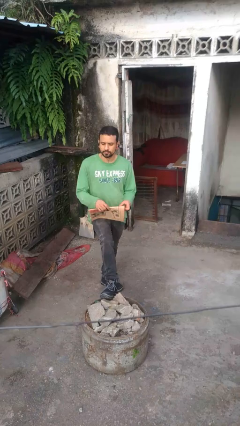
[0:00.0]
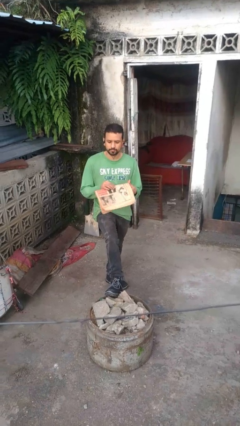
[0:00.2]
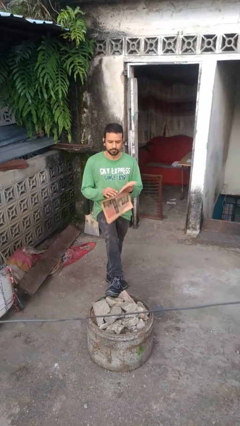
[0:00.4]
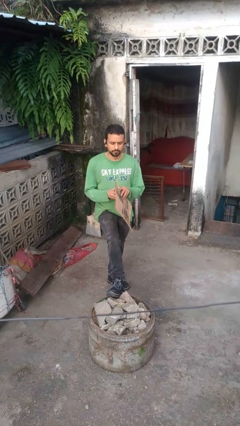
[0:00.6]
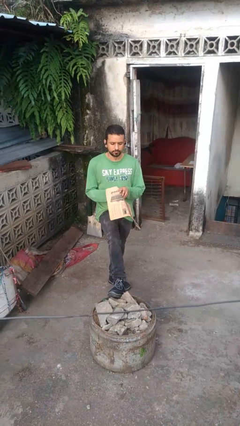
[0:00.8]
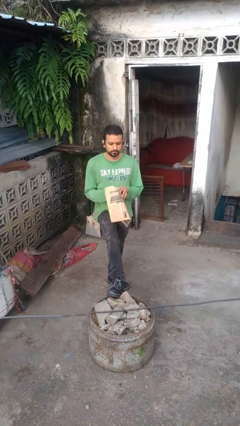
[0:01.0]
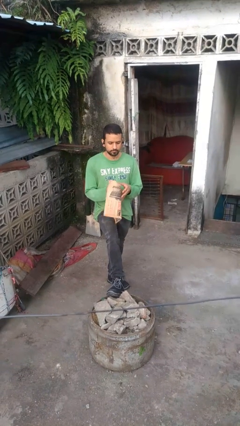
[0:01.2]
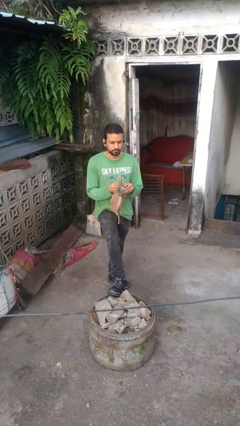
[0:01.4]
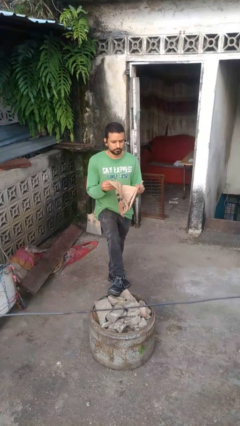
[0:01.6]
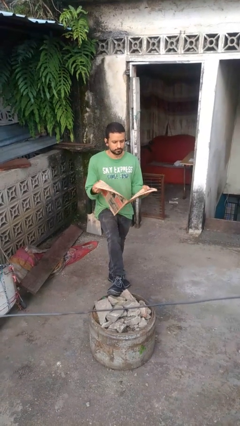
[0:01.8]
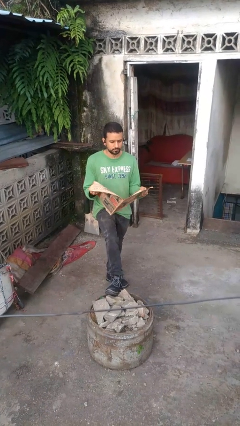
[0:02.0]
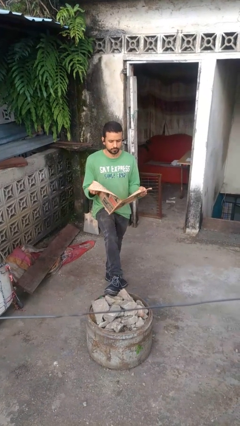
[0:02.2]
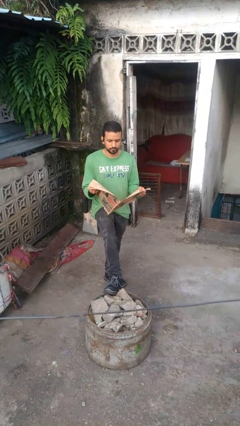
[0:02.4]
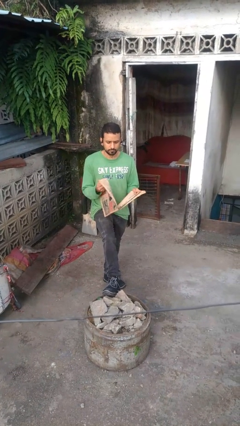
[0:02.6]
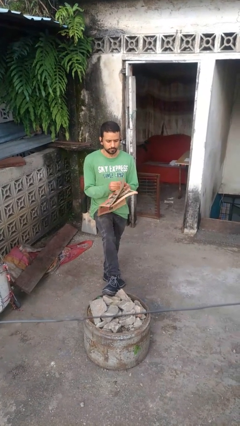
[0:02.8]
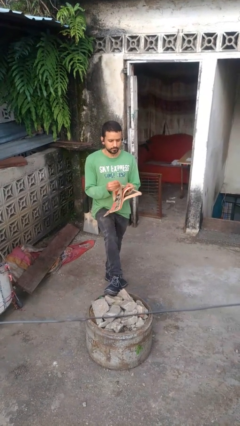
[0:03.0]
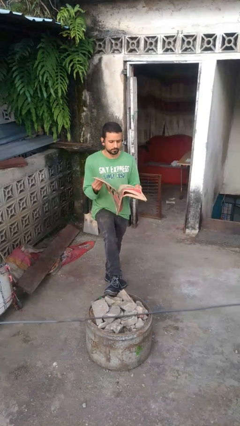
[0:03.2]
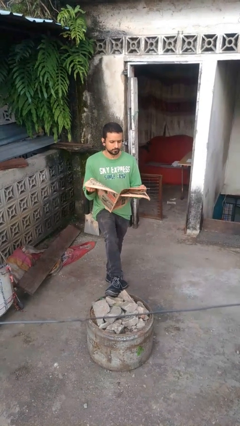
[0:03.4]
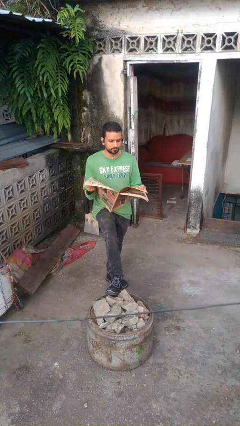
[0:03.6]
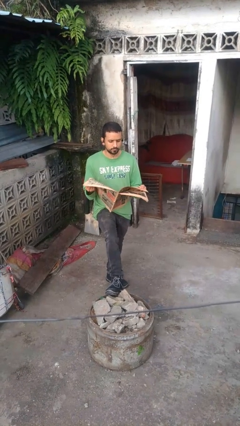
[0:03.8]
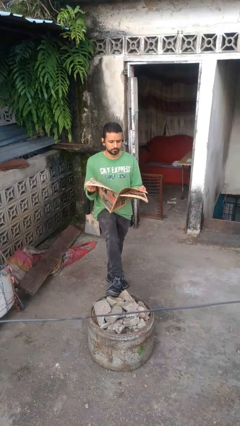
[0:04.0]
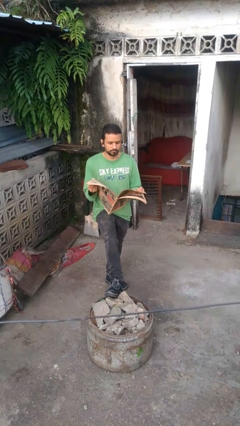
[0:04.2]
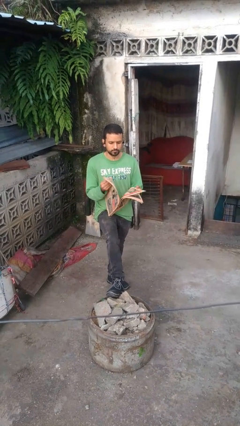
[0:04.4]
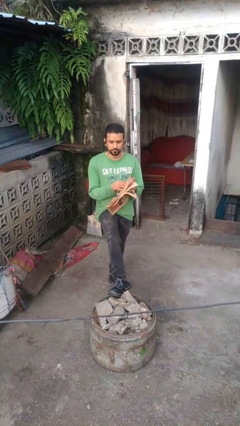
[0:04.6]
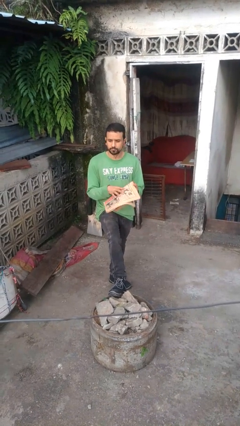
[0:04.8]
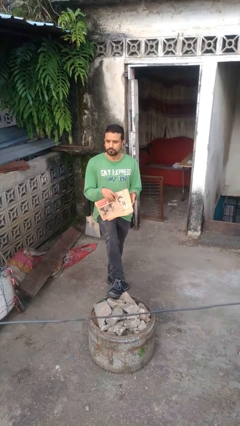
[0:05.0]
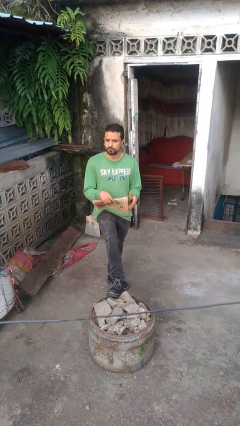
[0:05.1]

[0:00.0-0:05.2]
person reads newspaper

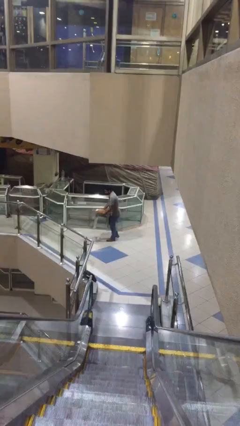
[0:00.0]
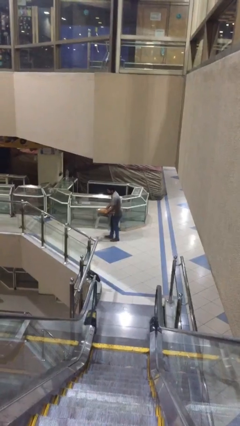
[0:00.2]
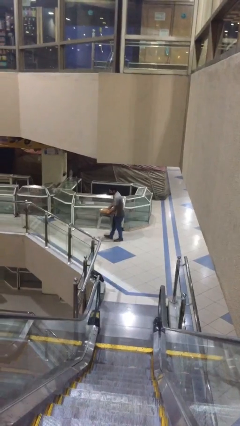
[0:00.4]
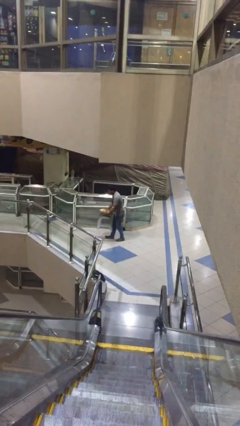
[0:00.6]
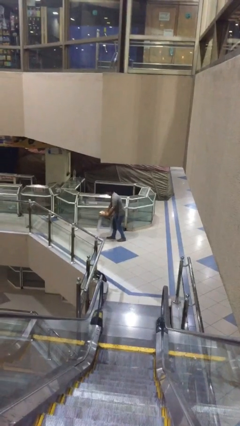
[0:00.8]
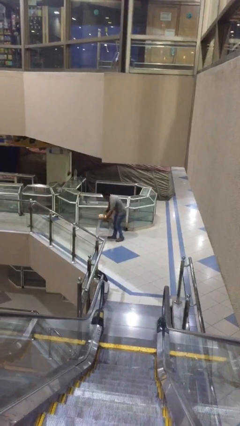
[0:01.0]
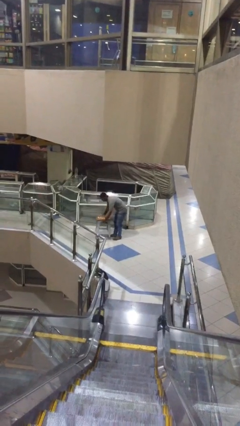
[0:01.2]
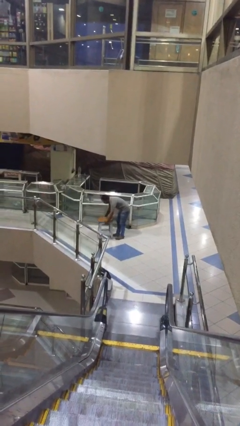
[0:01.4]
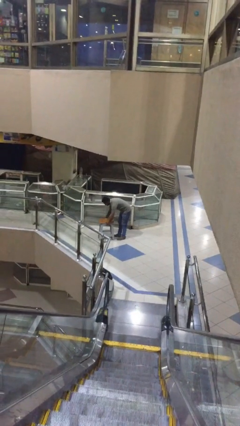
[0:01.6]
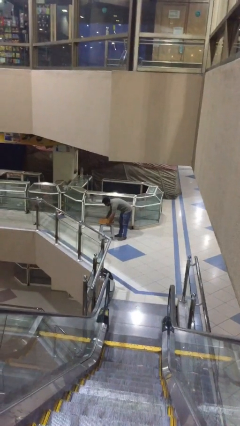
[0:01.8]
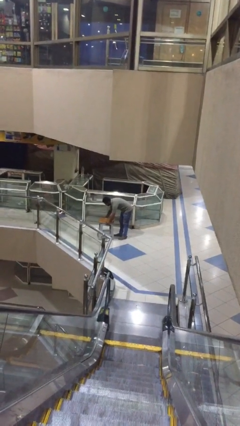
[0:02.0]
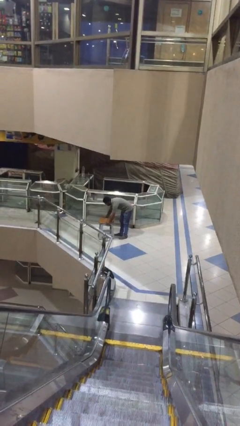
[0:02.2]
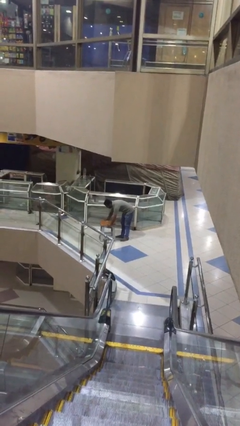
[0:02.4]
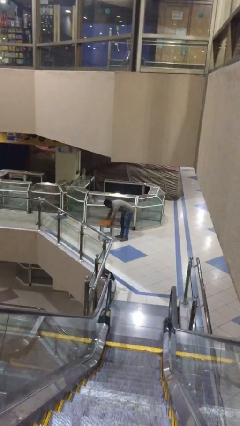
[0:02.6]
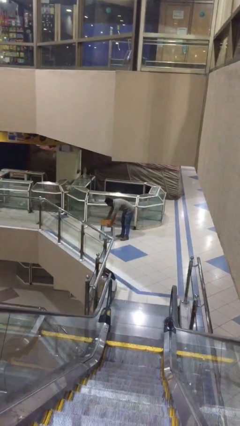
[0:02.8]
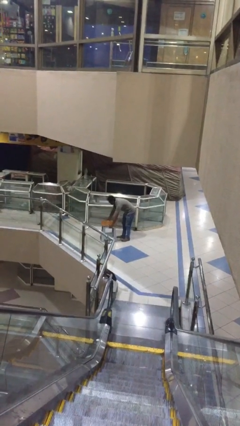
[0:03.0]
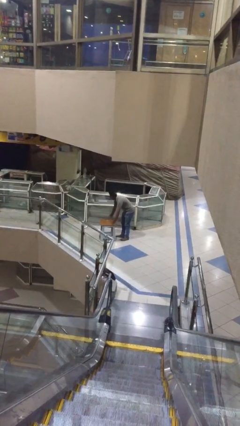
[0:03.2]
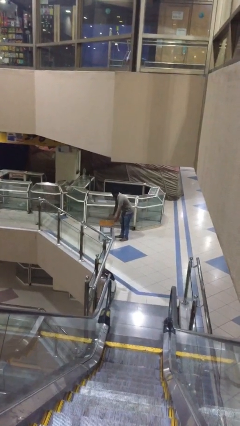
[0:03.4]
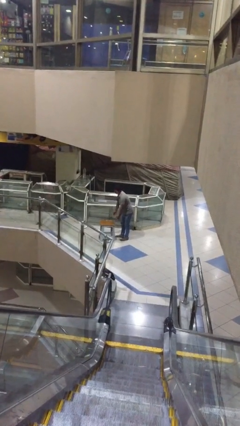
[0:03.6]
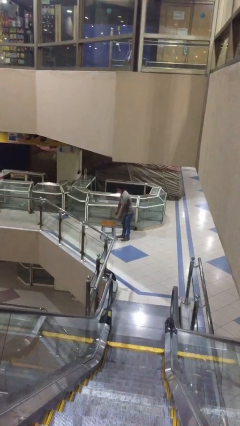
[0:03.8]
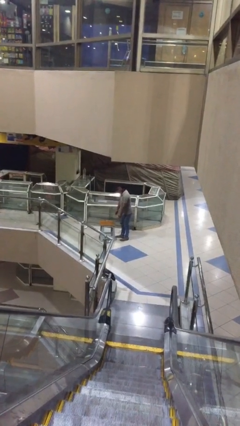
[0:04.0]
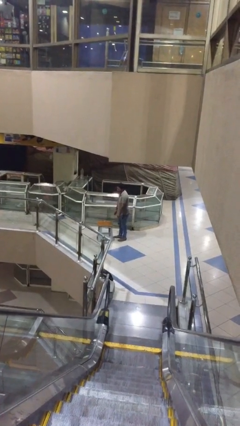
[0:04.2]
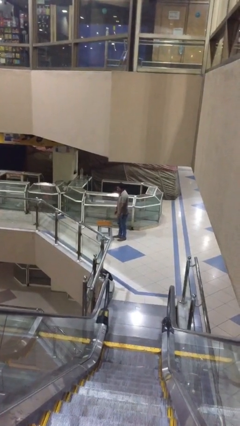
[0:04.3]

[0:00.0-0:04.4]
person puts down object on floor

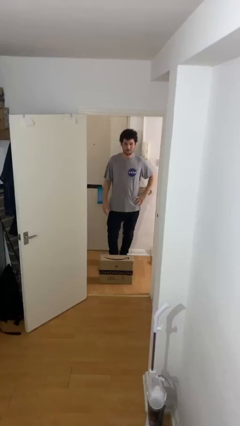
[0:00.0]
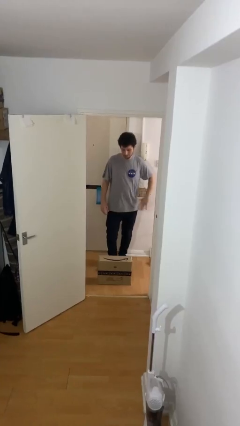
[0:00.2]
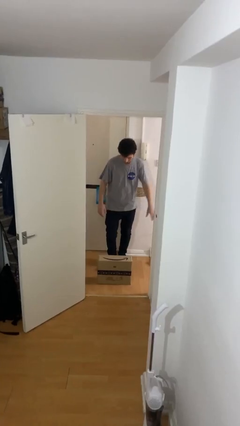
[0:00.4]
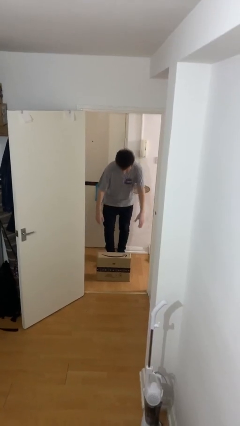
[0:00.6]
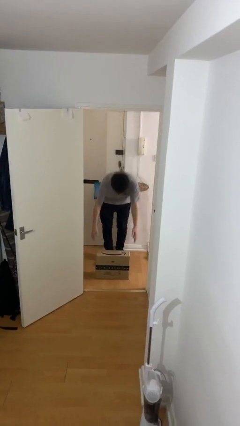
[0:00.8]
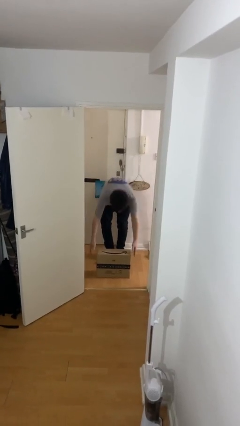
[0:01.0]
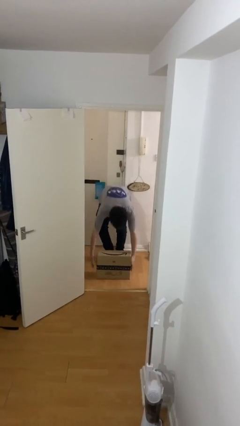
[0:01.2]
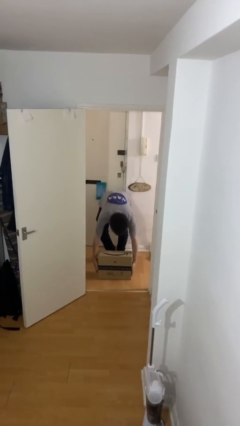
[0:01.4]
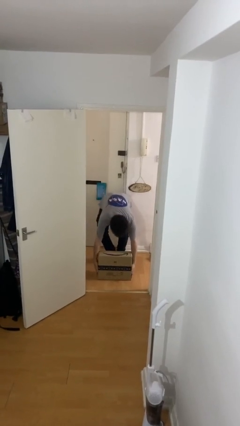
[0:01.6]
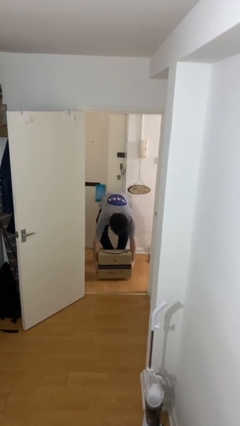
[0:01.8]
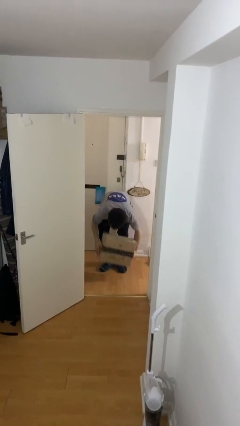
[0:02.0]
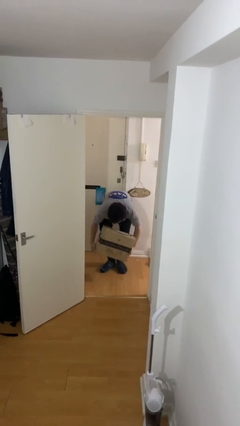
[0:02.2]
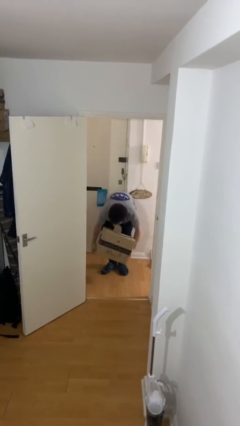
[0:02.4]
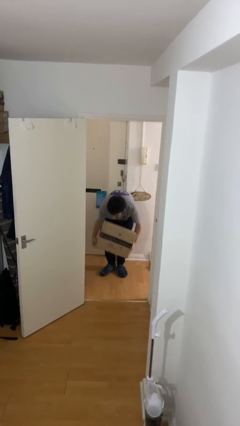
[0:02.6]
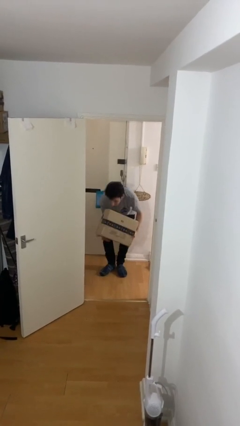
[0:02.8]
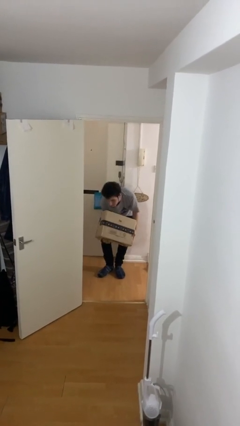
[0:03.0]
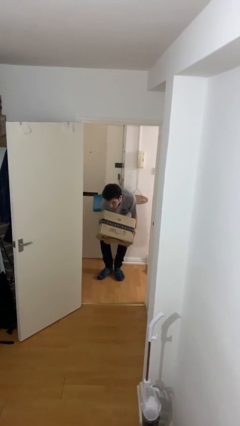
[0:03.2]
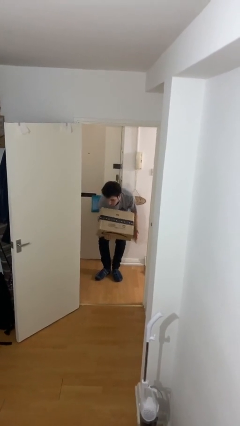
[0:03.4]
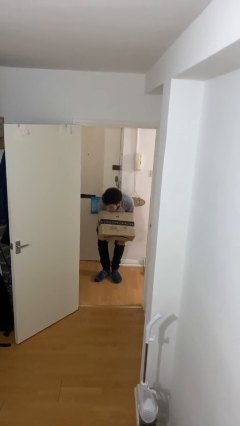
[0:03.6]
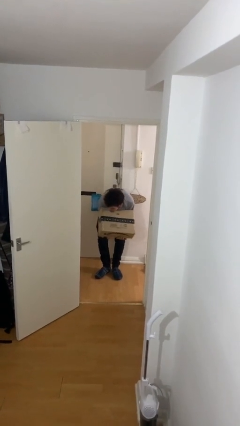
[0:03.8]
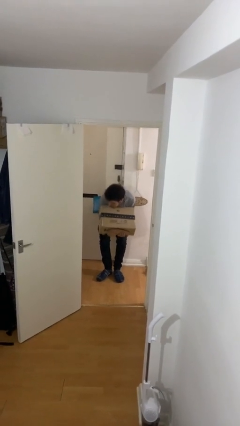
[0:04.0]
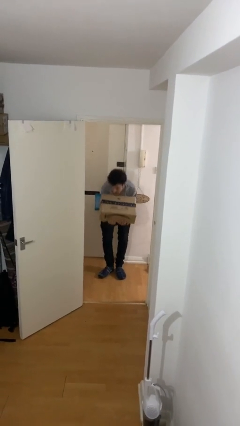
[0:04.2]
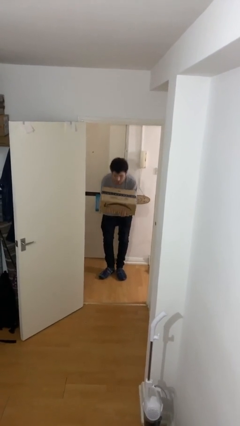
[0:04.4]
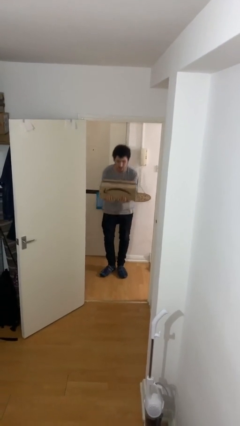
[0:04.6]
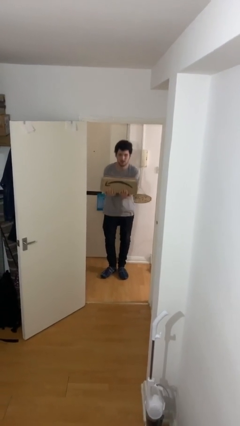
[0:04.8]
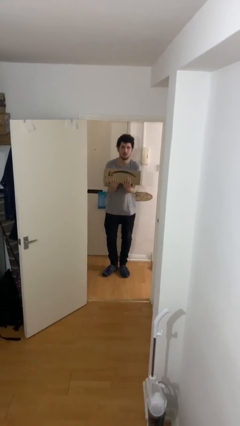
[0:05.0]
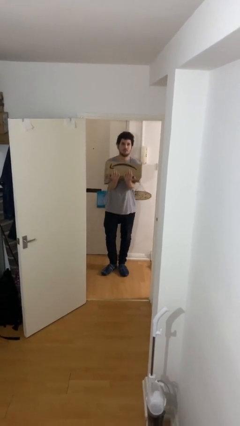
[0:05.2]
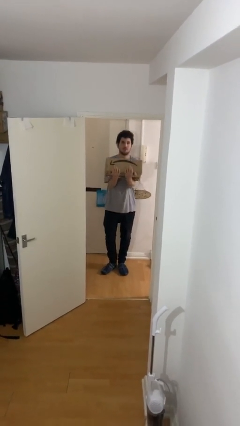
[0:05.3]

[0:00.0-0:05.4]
person picks up object from floor

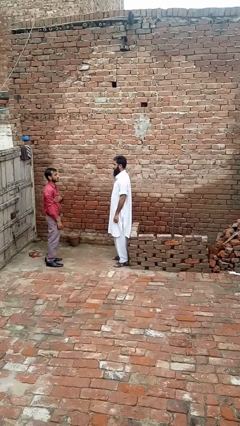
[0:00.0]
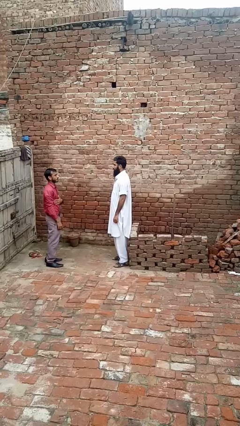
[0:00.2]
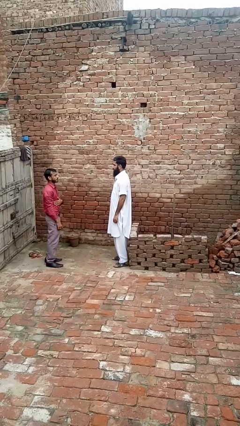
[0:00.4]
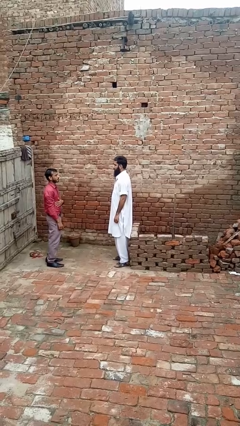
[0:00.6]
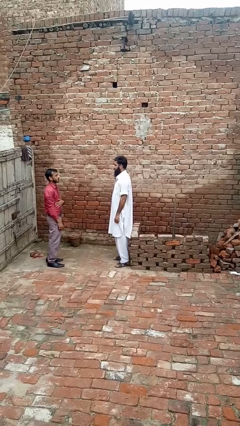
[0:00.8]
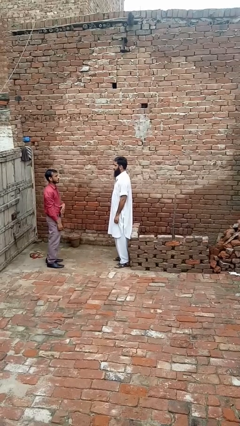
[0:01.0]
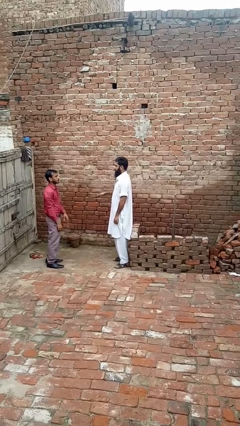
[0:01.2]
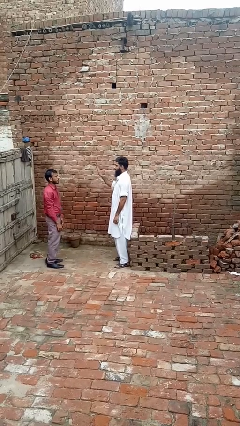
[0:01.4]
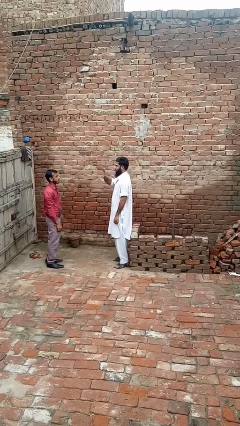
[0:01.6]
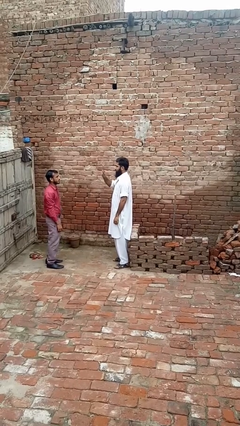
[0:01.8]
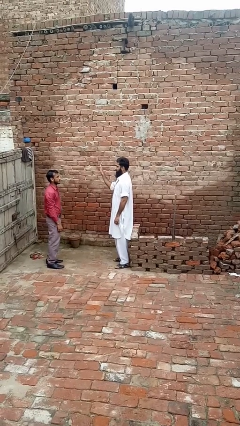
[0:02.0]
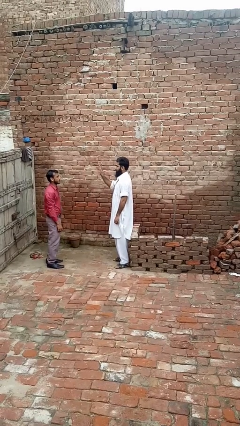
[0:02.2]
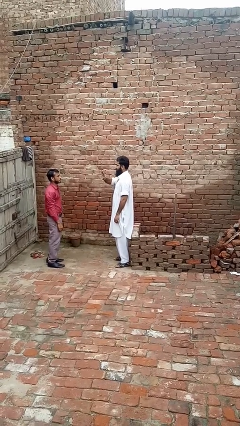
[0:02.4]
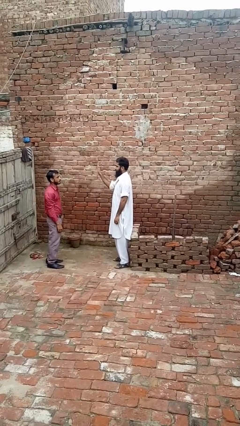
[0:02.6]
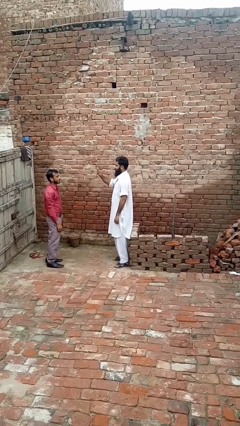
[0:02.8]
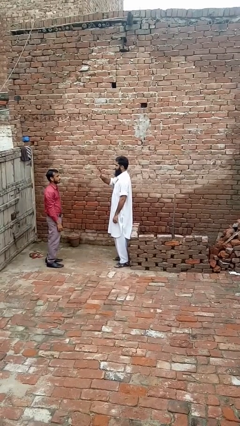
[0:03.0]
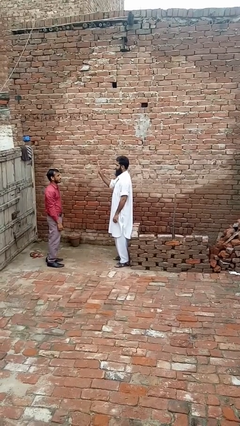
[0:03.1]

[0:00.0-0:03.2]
person waves at person
